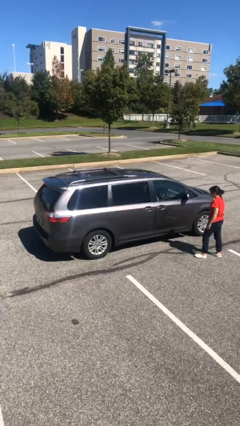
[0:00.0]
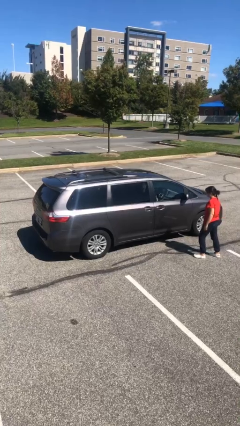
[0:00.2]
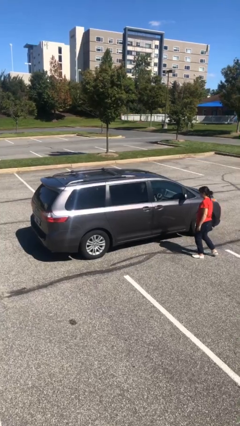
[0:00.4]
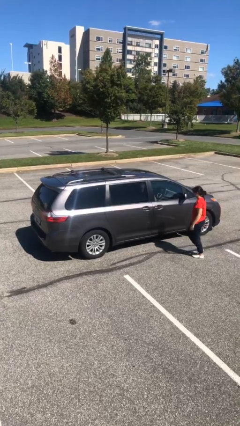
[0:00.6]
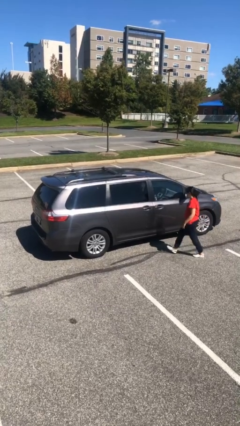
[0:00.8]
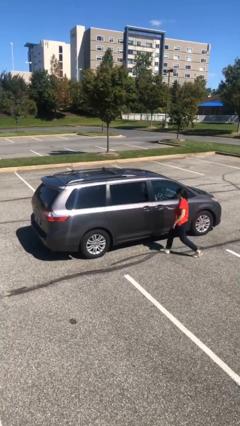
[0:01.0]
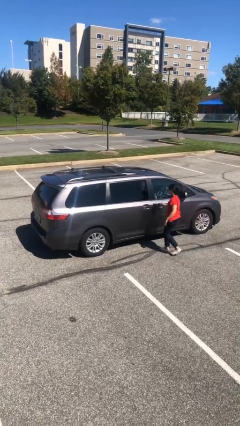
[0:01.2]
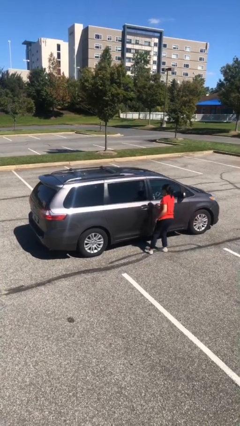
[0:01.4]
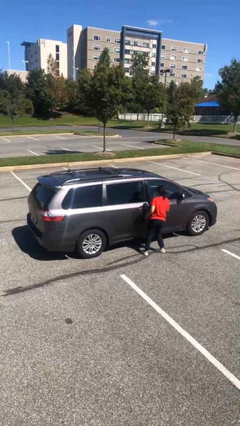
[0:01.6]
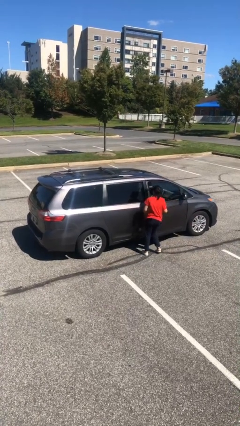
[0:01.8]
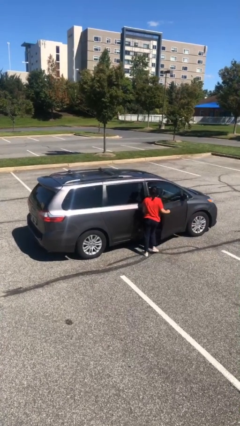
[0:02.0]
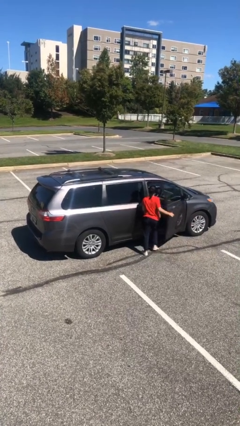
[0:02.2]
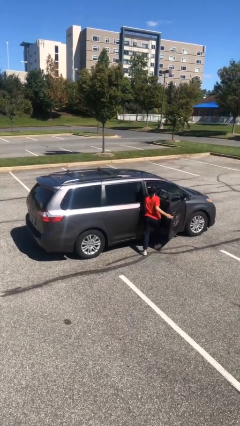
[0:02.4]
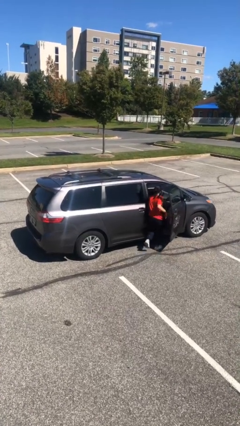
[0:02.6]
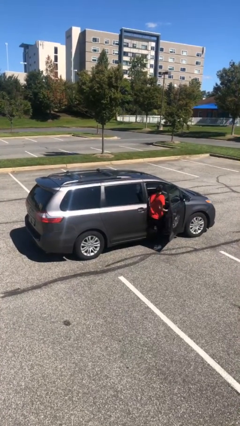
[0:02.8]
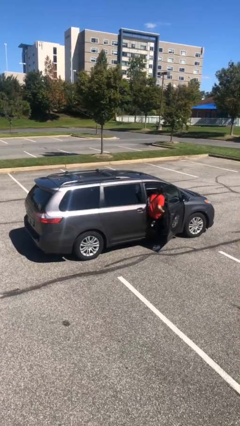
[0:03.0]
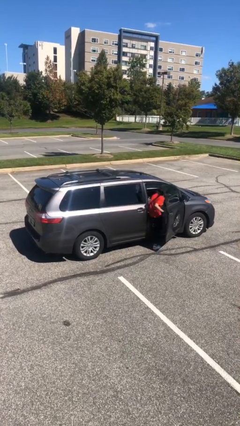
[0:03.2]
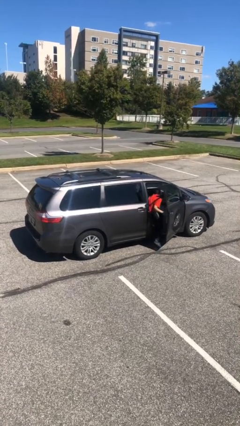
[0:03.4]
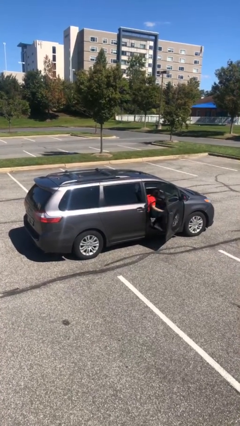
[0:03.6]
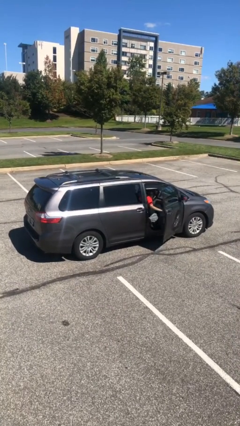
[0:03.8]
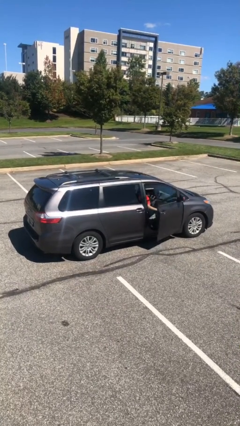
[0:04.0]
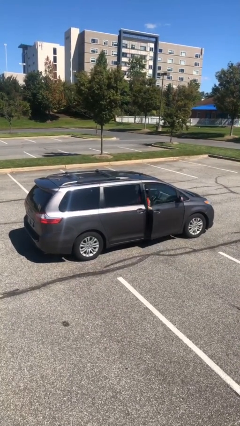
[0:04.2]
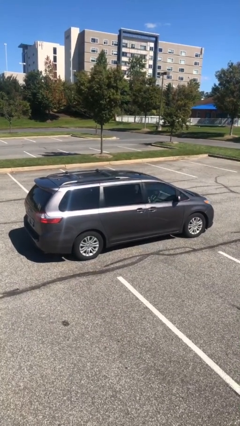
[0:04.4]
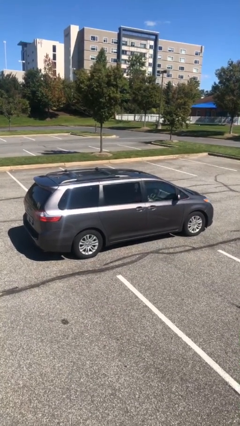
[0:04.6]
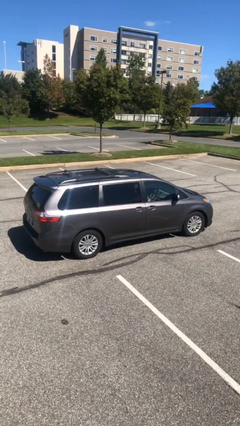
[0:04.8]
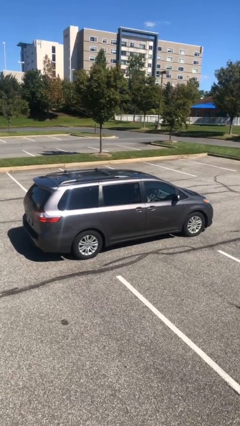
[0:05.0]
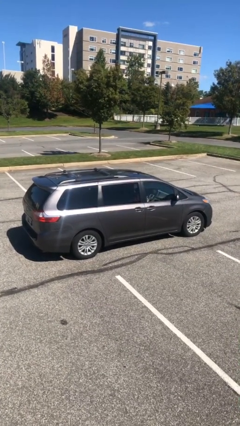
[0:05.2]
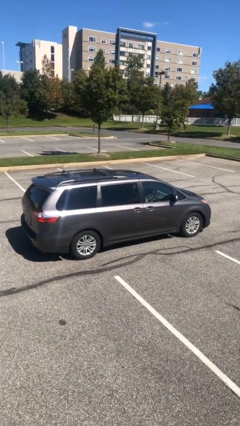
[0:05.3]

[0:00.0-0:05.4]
car picks up person

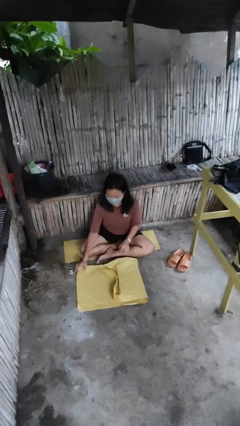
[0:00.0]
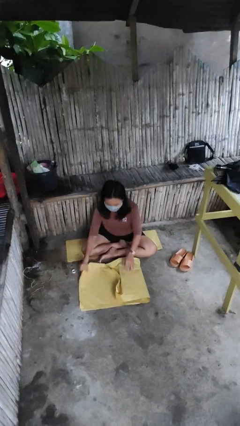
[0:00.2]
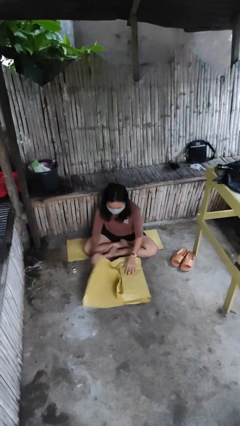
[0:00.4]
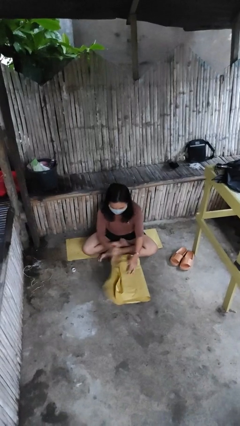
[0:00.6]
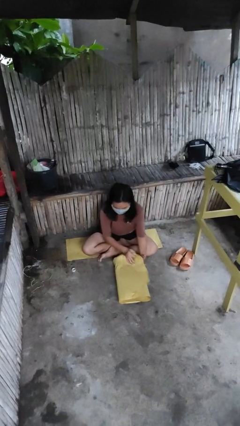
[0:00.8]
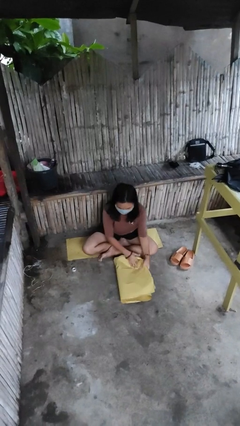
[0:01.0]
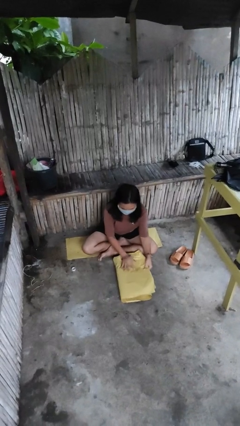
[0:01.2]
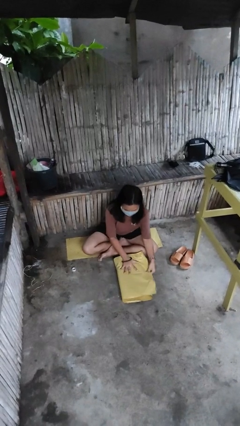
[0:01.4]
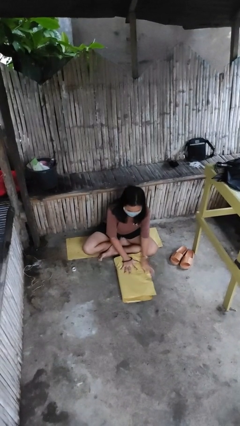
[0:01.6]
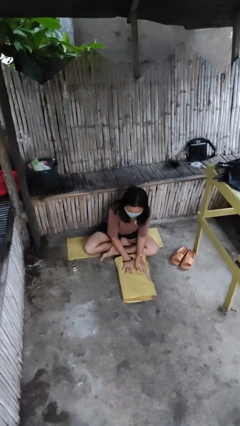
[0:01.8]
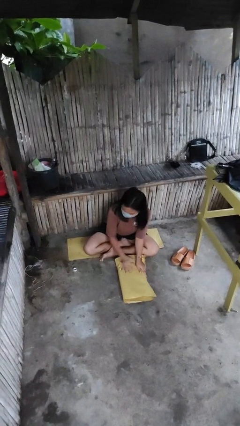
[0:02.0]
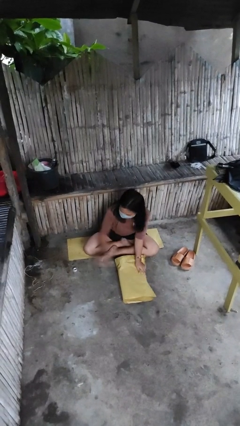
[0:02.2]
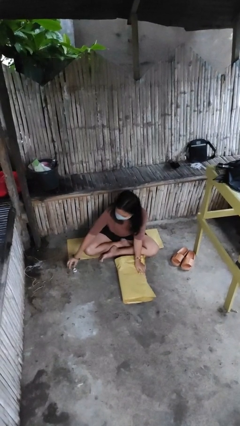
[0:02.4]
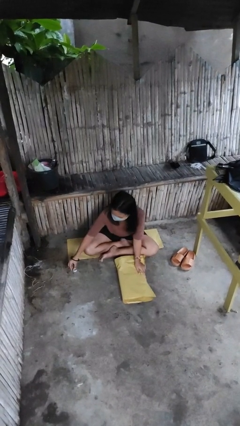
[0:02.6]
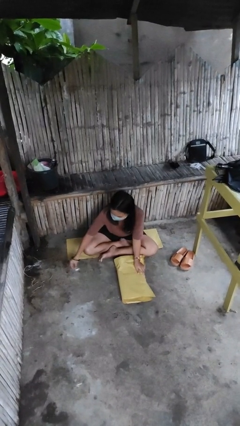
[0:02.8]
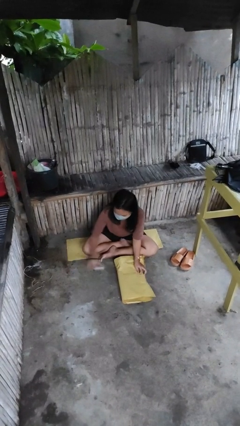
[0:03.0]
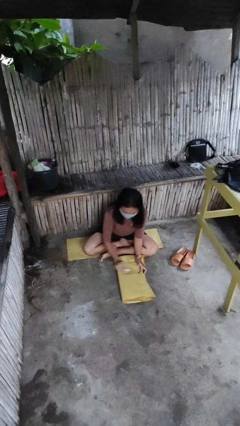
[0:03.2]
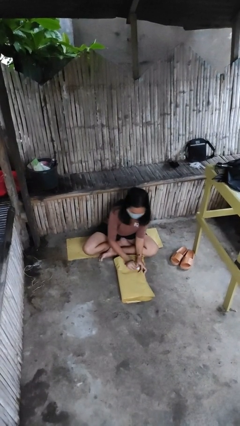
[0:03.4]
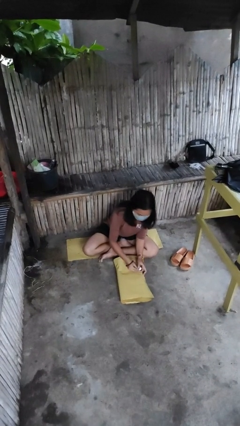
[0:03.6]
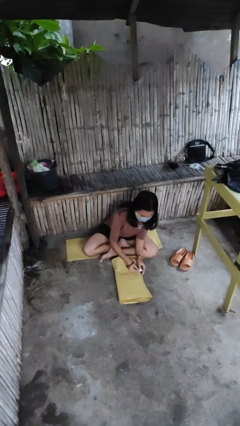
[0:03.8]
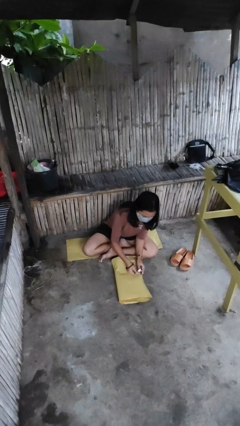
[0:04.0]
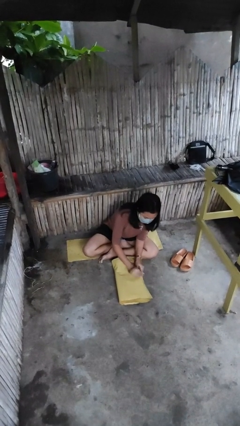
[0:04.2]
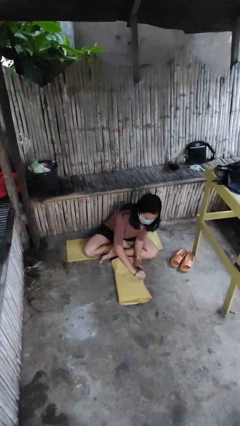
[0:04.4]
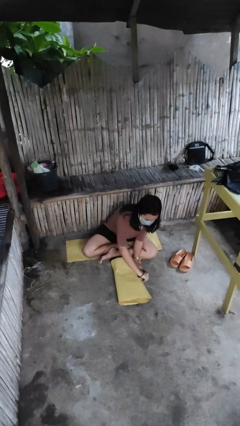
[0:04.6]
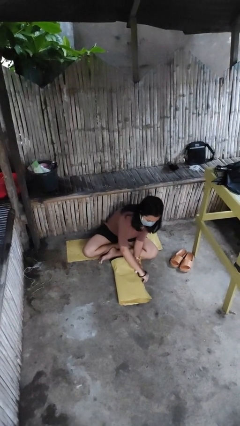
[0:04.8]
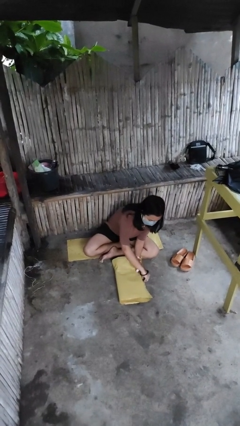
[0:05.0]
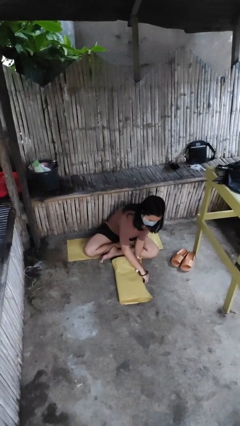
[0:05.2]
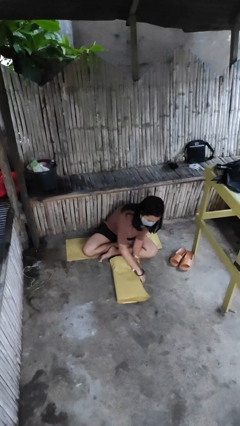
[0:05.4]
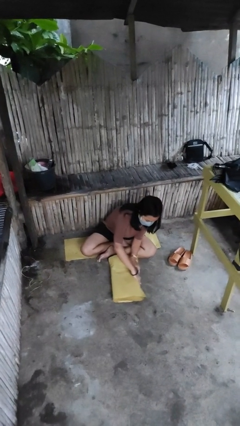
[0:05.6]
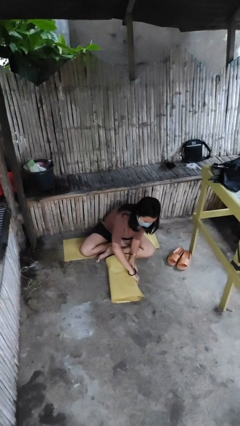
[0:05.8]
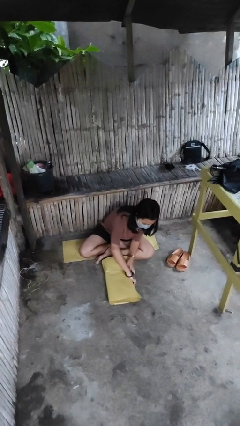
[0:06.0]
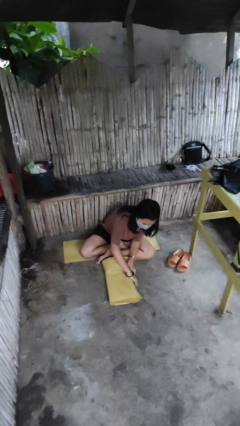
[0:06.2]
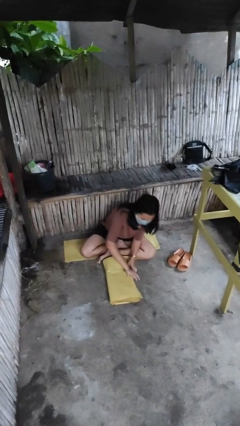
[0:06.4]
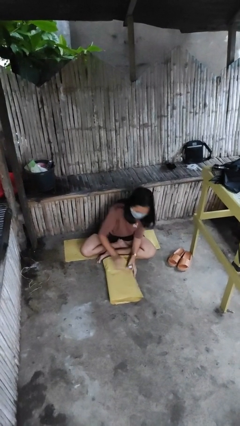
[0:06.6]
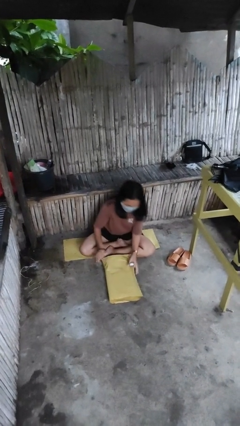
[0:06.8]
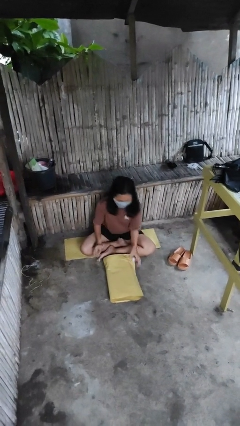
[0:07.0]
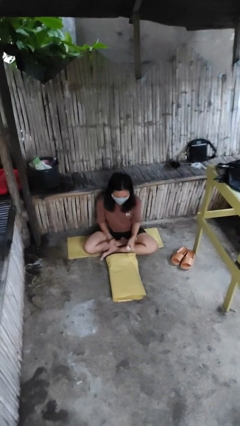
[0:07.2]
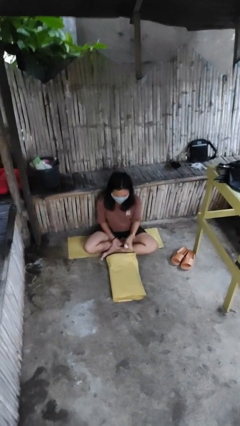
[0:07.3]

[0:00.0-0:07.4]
person wraps box

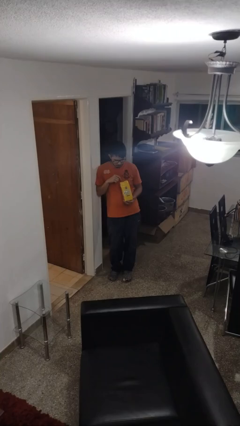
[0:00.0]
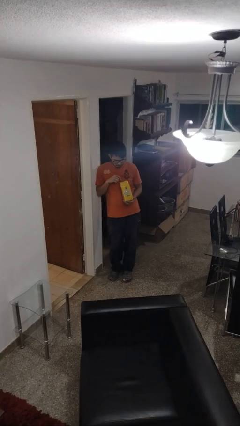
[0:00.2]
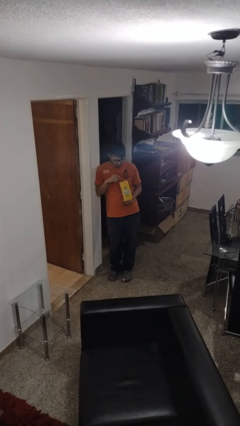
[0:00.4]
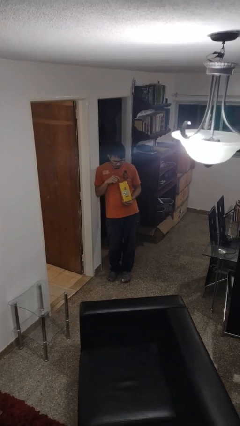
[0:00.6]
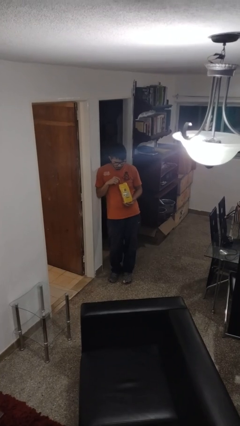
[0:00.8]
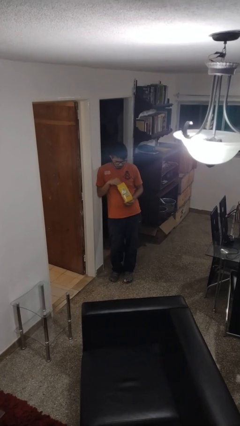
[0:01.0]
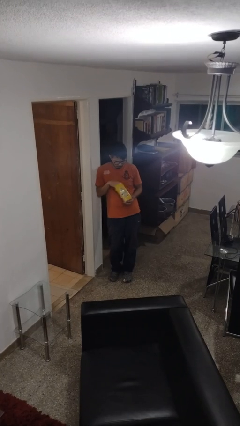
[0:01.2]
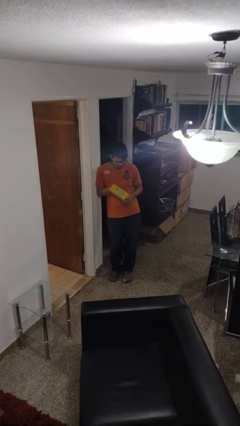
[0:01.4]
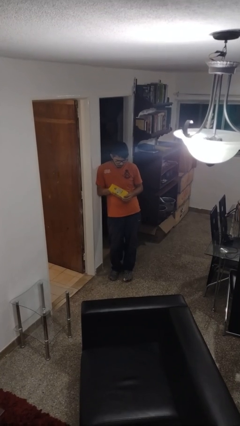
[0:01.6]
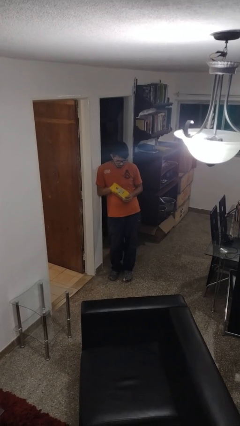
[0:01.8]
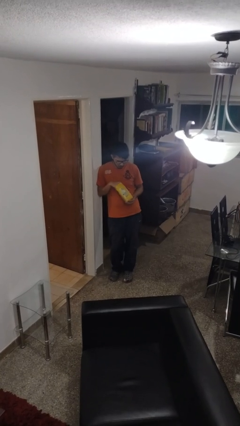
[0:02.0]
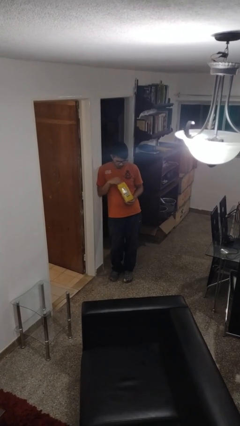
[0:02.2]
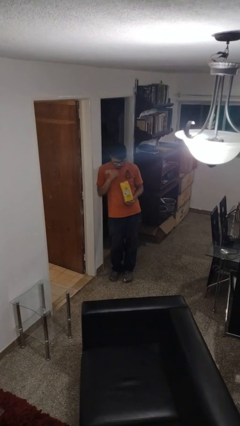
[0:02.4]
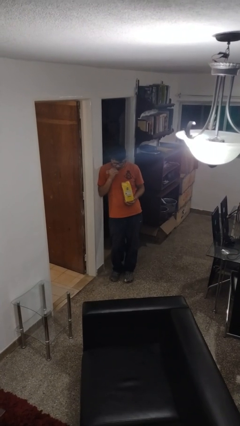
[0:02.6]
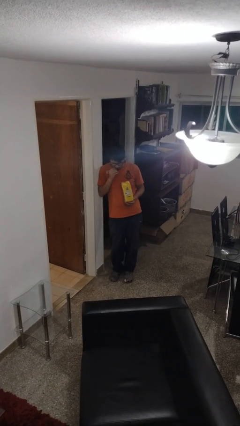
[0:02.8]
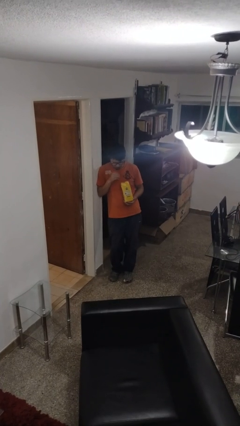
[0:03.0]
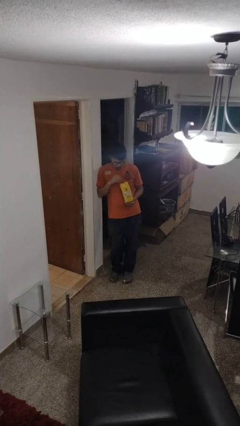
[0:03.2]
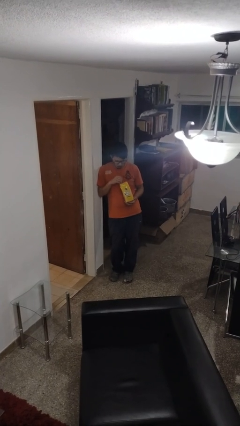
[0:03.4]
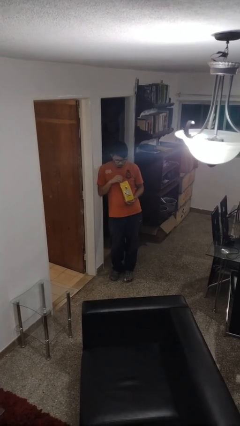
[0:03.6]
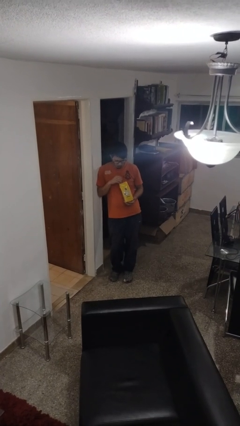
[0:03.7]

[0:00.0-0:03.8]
person eats snack from bag

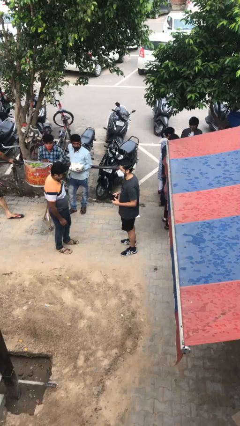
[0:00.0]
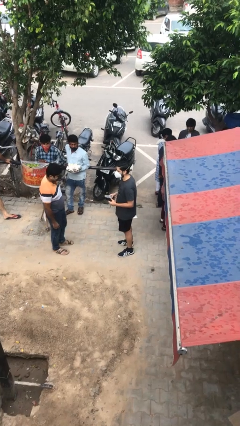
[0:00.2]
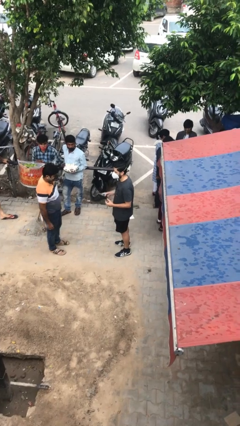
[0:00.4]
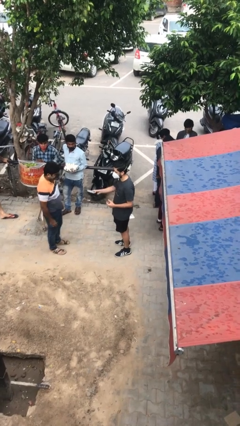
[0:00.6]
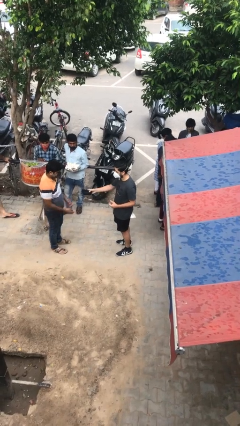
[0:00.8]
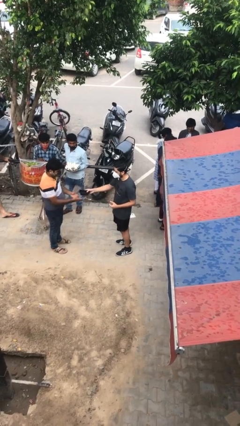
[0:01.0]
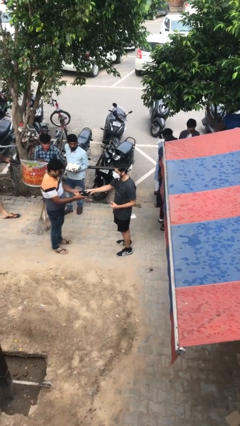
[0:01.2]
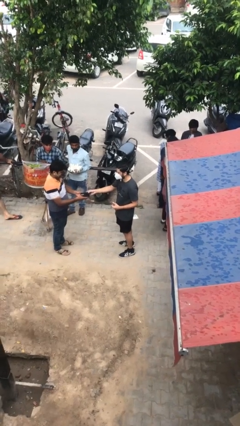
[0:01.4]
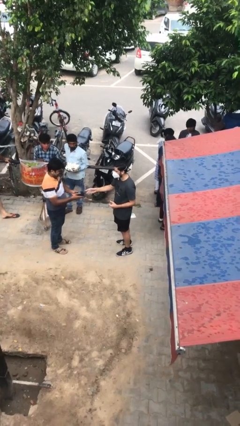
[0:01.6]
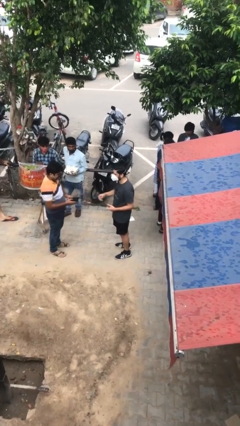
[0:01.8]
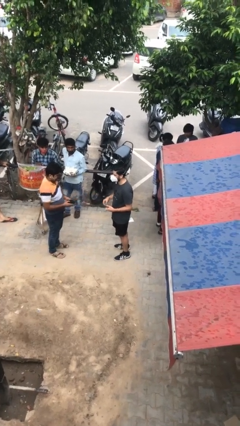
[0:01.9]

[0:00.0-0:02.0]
person transfers object to person
